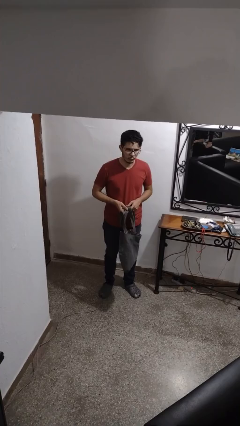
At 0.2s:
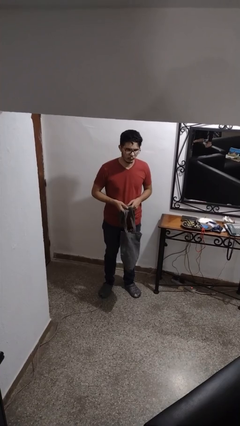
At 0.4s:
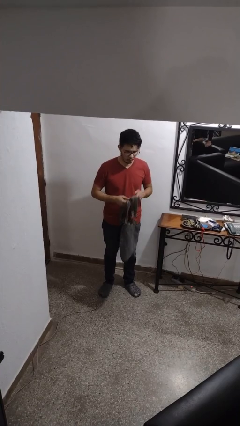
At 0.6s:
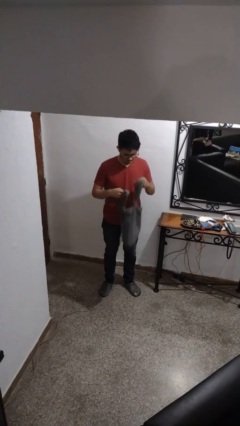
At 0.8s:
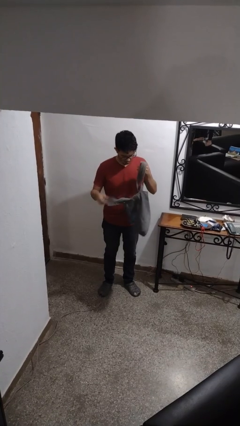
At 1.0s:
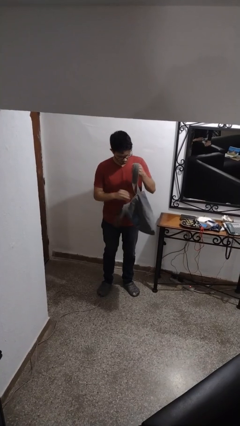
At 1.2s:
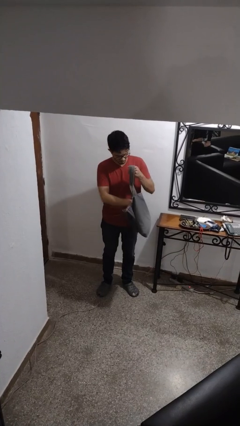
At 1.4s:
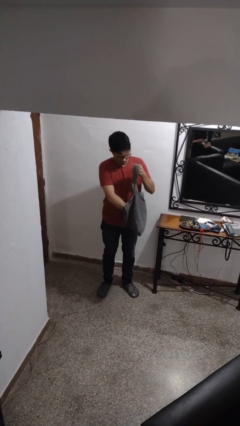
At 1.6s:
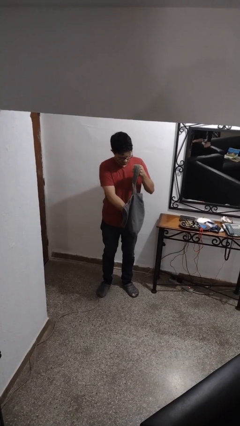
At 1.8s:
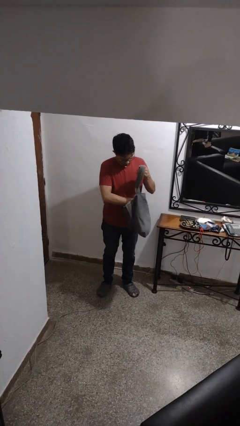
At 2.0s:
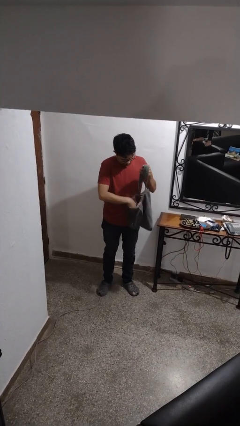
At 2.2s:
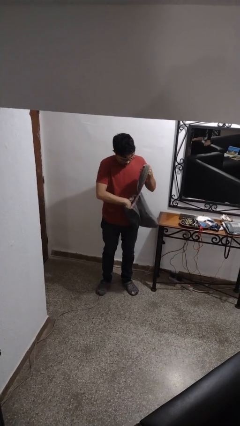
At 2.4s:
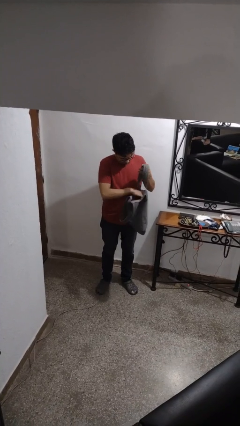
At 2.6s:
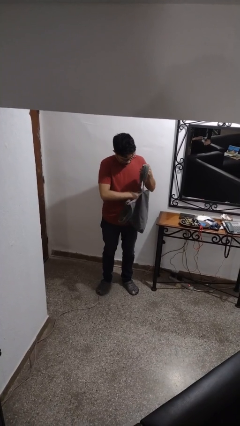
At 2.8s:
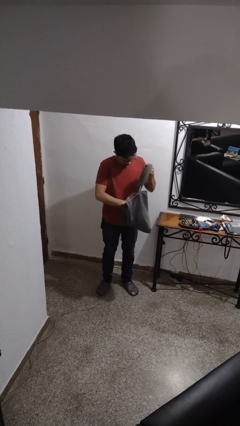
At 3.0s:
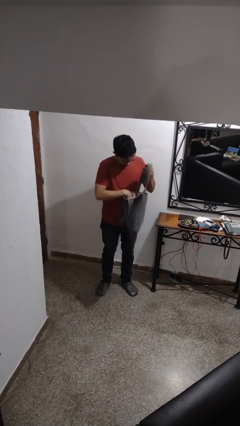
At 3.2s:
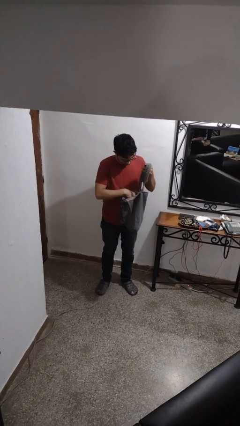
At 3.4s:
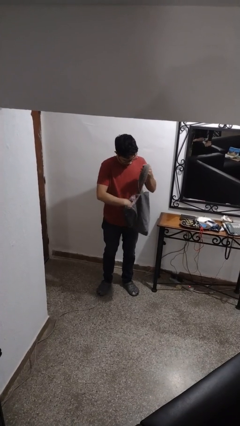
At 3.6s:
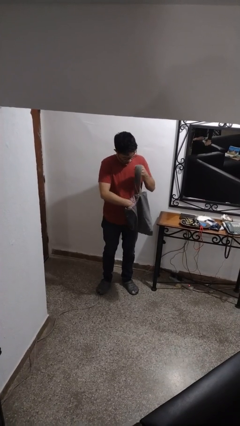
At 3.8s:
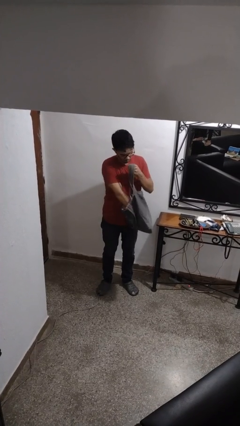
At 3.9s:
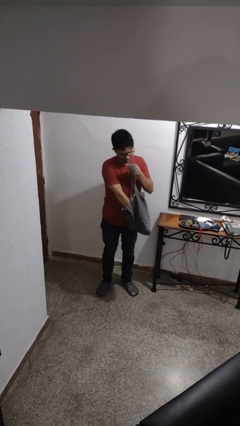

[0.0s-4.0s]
person searches in purse

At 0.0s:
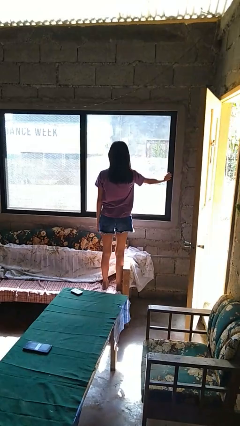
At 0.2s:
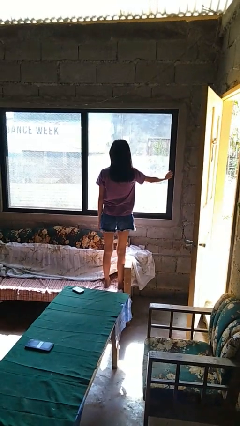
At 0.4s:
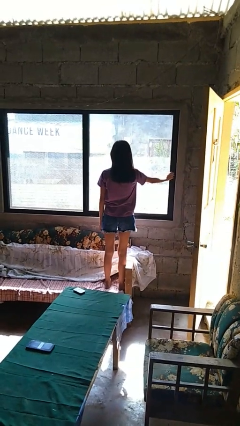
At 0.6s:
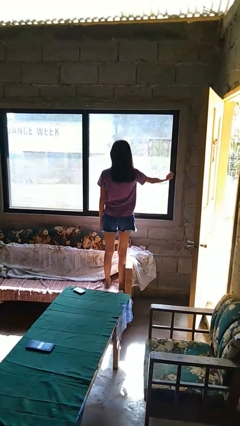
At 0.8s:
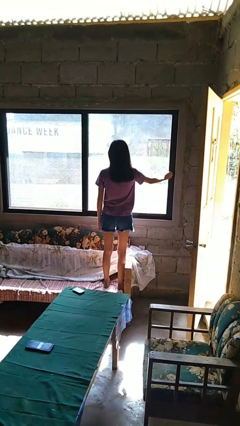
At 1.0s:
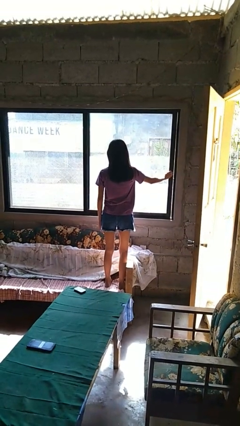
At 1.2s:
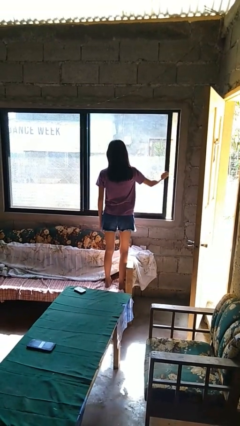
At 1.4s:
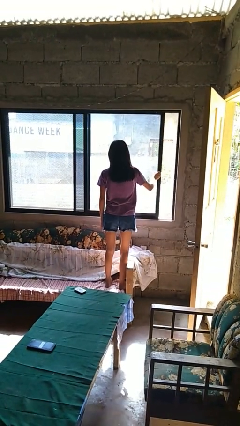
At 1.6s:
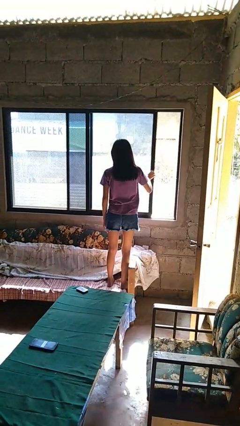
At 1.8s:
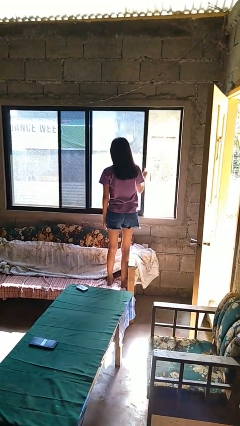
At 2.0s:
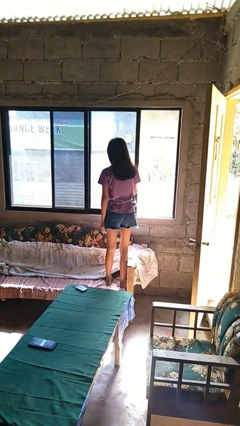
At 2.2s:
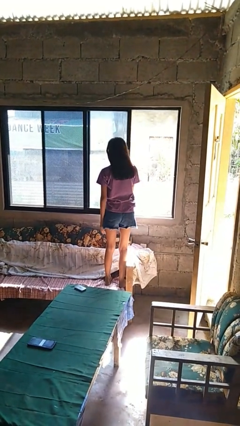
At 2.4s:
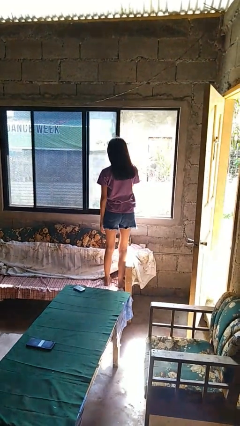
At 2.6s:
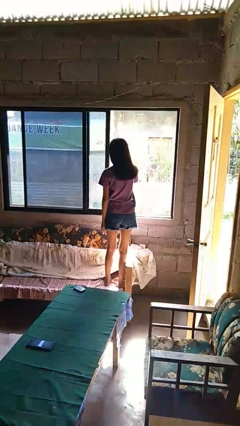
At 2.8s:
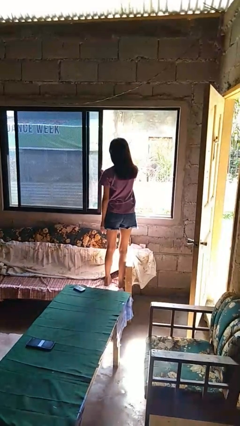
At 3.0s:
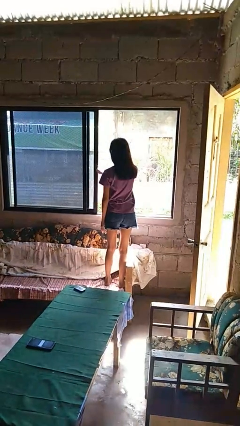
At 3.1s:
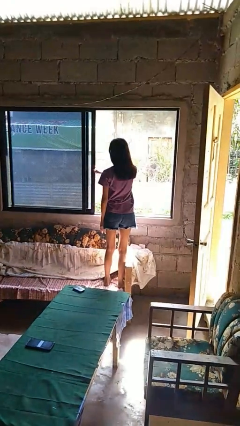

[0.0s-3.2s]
person opens home window

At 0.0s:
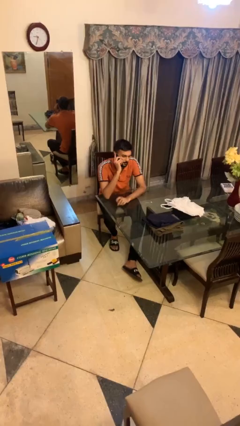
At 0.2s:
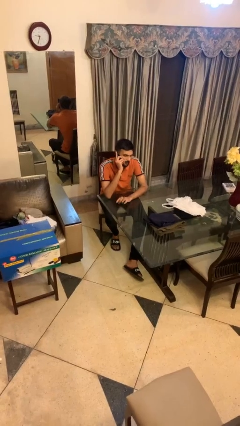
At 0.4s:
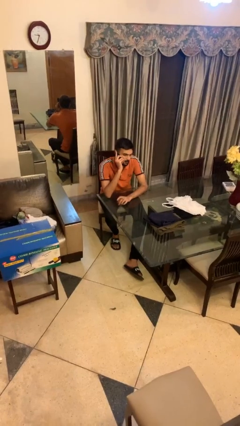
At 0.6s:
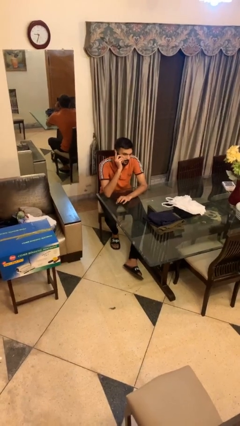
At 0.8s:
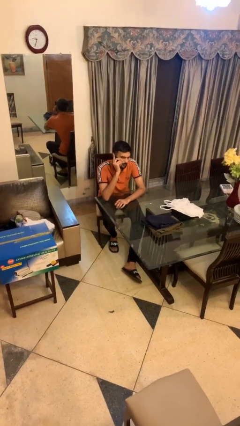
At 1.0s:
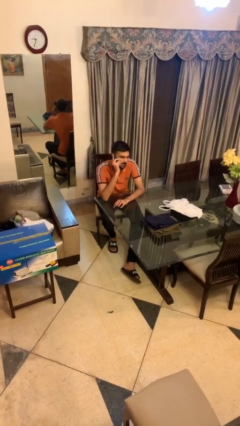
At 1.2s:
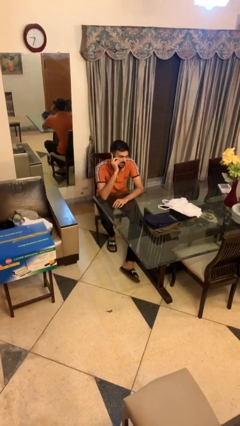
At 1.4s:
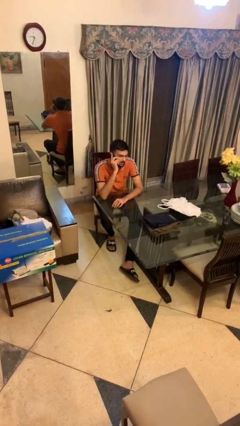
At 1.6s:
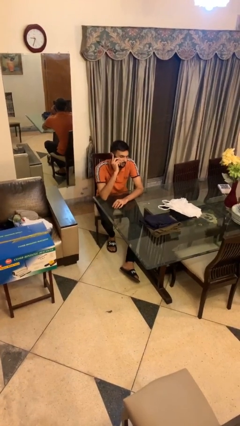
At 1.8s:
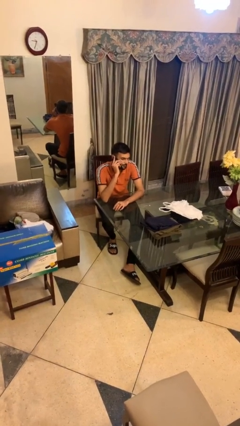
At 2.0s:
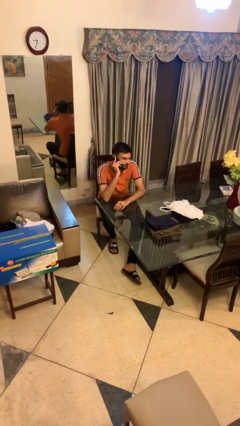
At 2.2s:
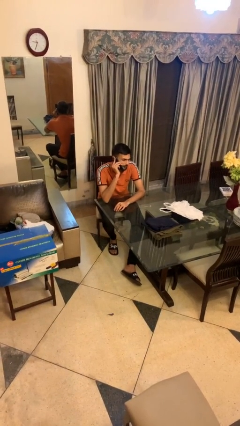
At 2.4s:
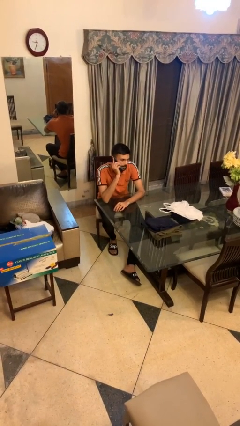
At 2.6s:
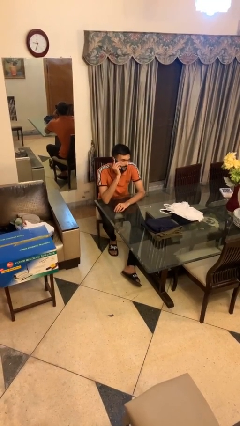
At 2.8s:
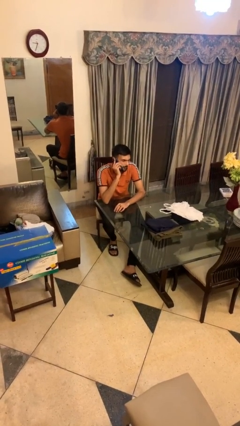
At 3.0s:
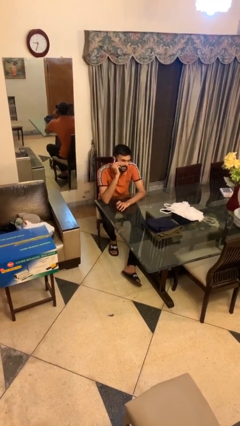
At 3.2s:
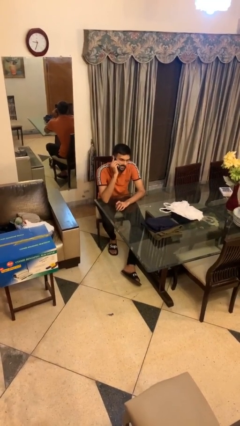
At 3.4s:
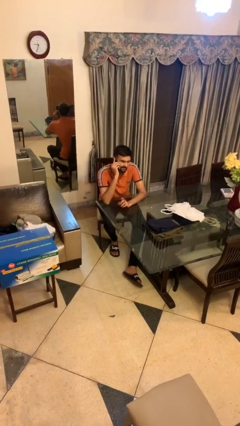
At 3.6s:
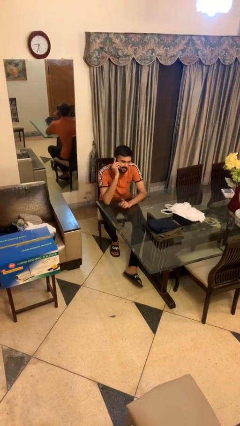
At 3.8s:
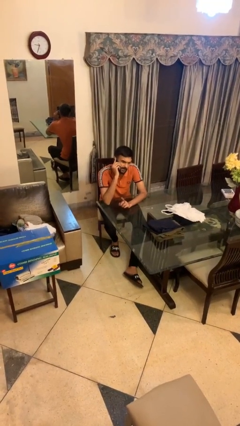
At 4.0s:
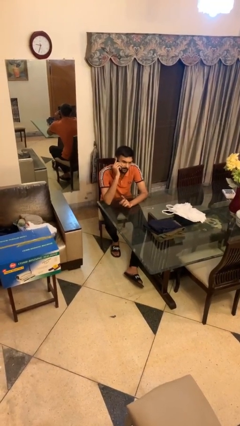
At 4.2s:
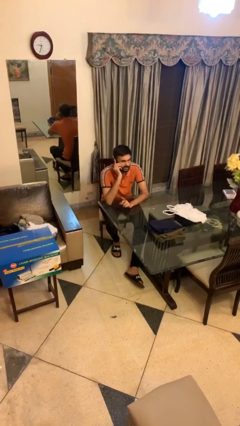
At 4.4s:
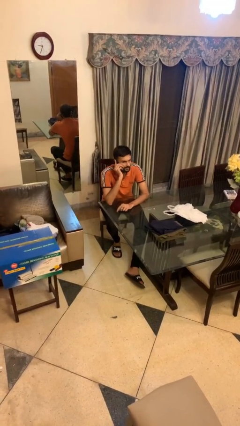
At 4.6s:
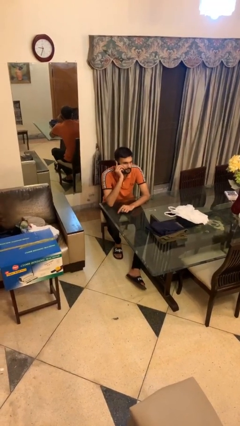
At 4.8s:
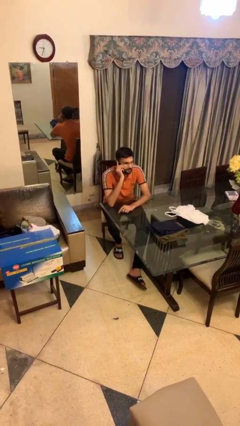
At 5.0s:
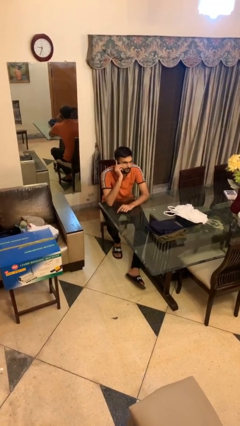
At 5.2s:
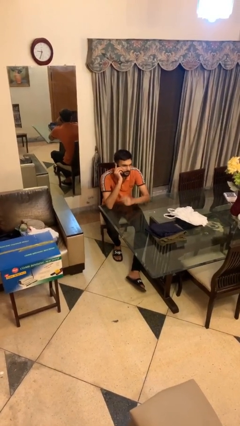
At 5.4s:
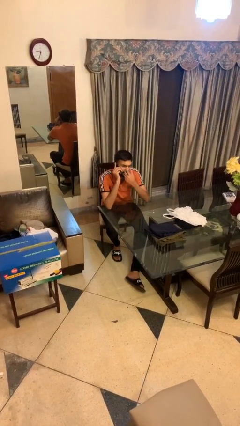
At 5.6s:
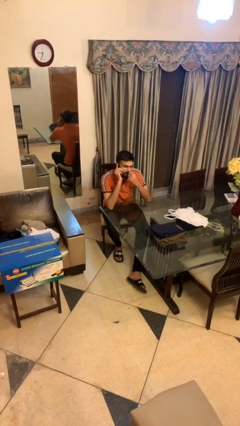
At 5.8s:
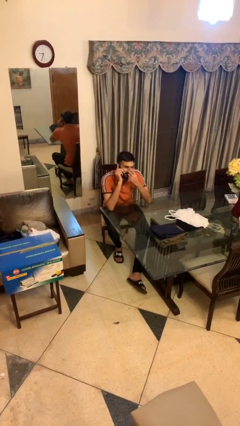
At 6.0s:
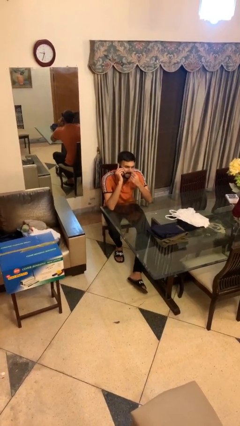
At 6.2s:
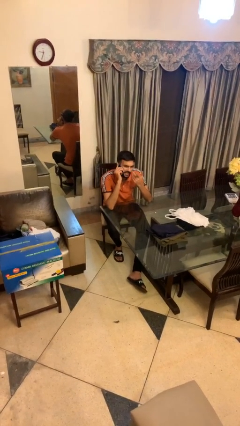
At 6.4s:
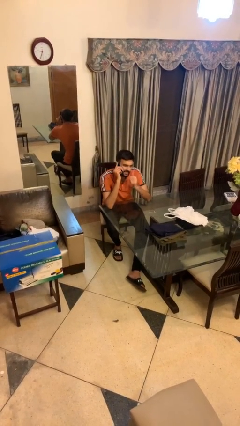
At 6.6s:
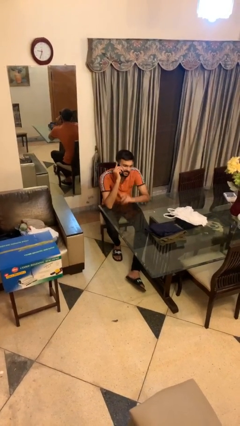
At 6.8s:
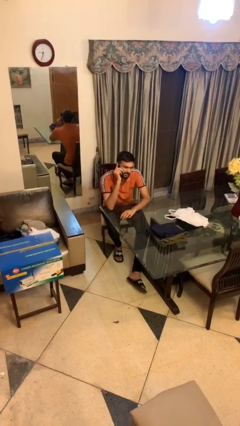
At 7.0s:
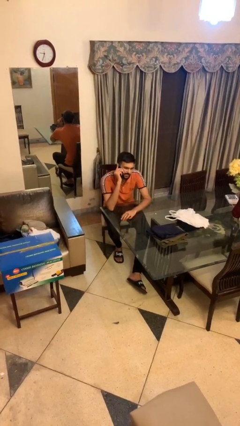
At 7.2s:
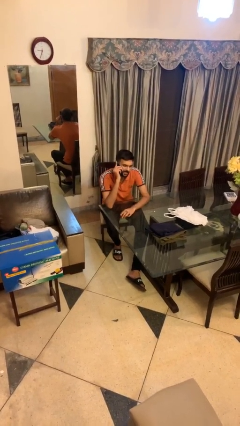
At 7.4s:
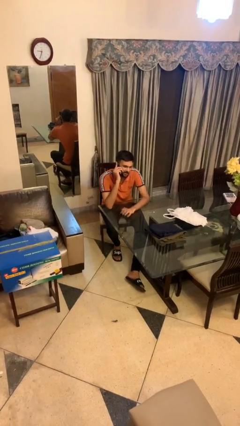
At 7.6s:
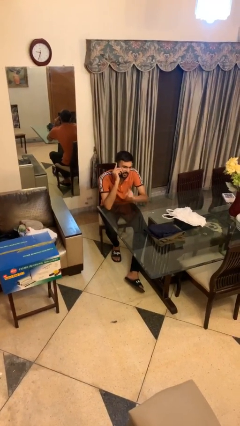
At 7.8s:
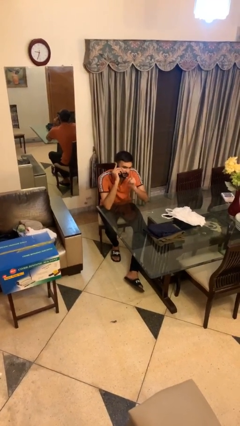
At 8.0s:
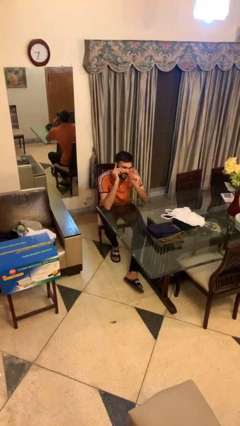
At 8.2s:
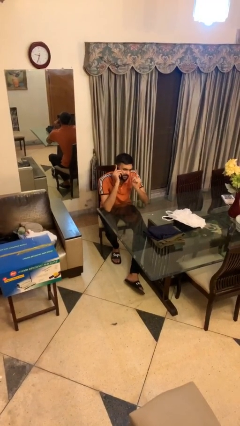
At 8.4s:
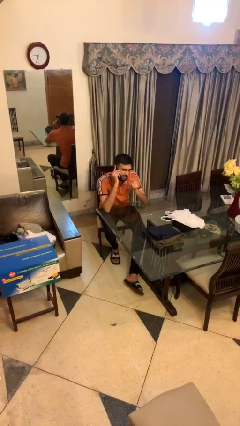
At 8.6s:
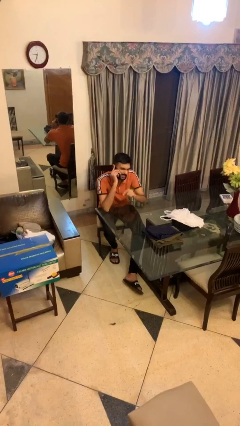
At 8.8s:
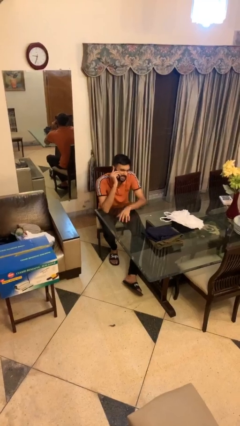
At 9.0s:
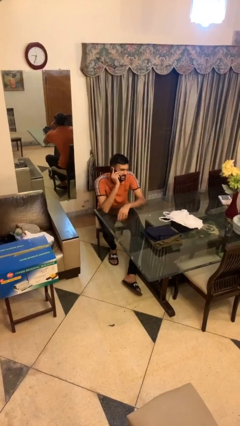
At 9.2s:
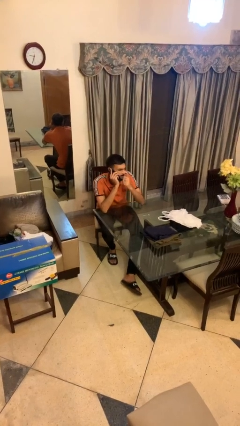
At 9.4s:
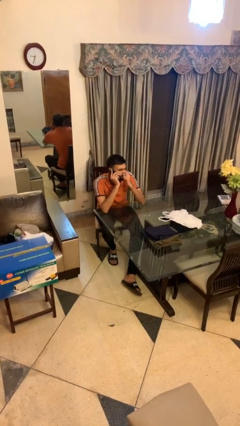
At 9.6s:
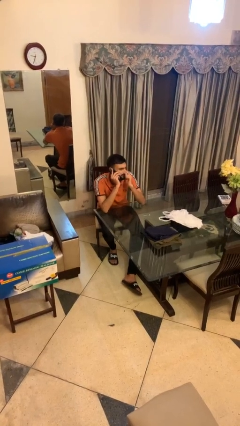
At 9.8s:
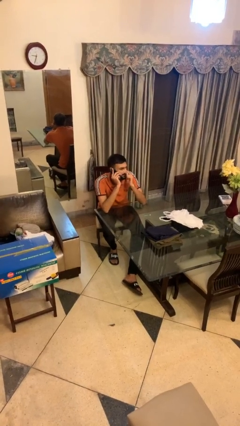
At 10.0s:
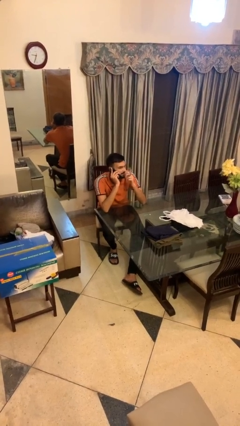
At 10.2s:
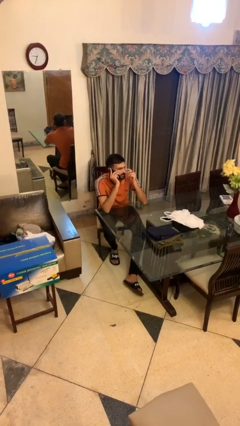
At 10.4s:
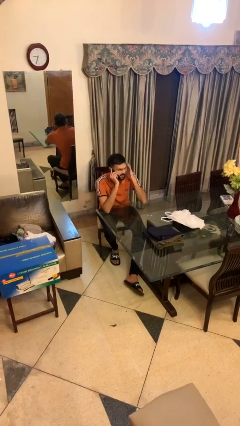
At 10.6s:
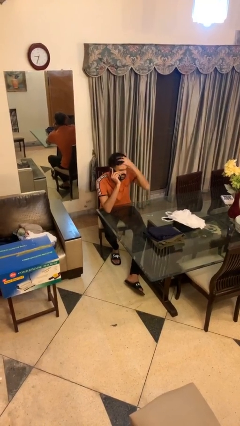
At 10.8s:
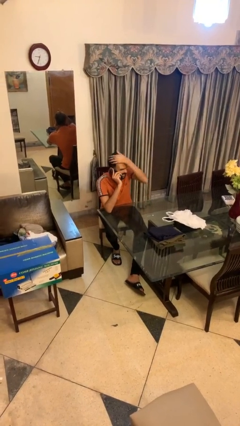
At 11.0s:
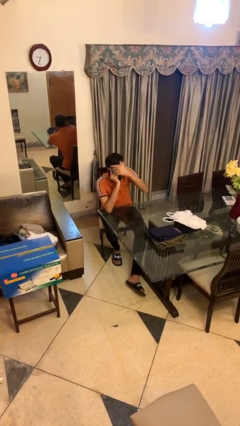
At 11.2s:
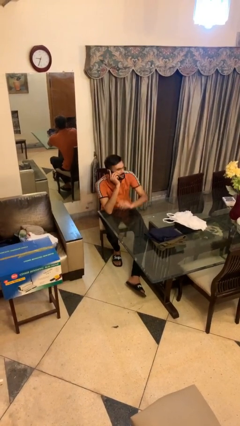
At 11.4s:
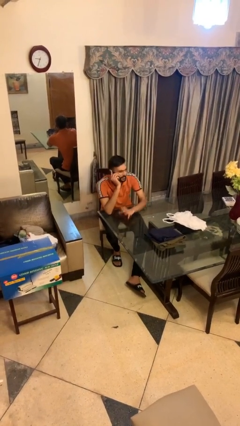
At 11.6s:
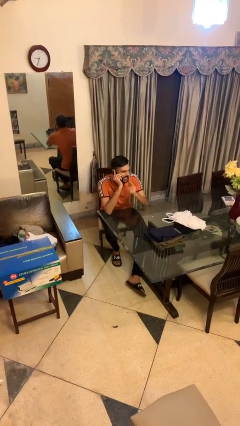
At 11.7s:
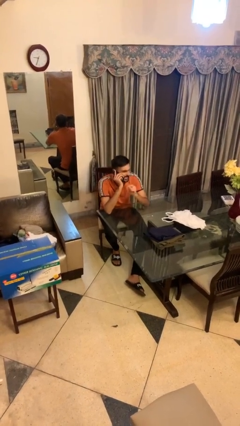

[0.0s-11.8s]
person talks on phone
